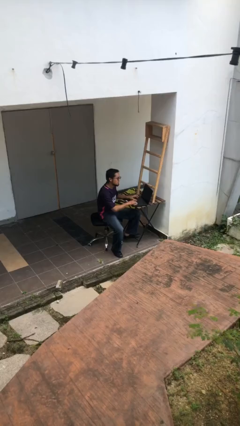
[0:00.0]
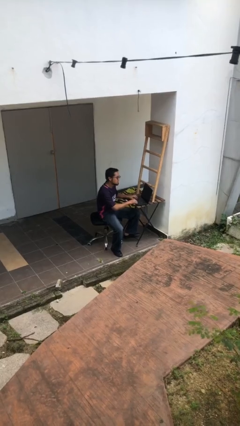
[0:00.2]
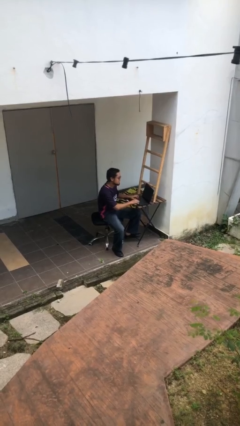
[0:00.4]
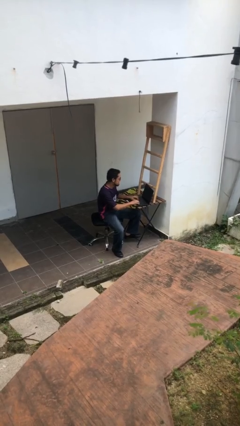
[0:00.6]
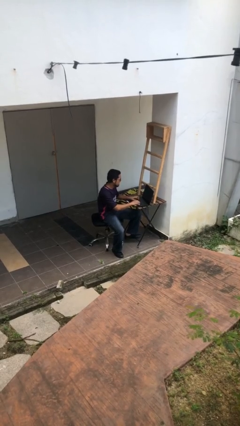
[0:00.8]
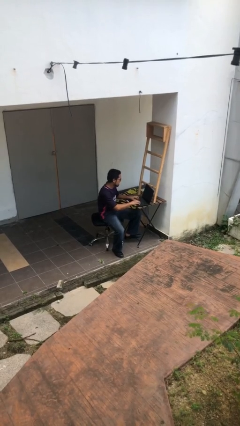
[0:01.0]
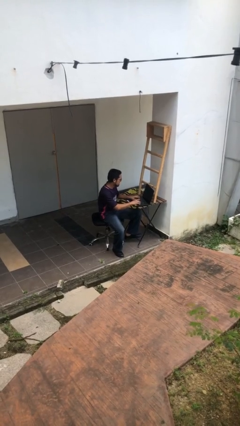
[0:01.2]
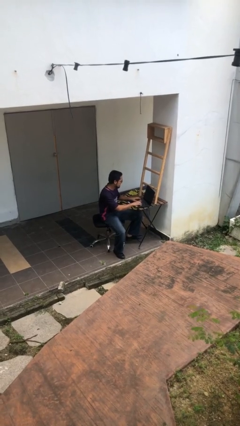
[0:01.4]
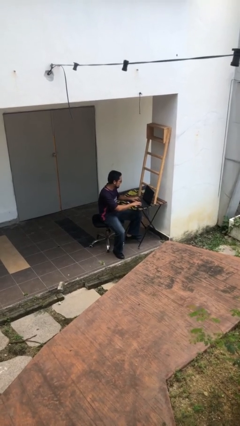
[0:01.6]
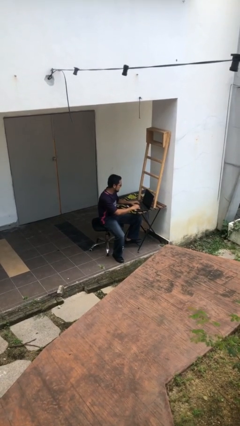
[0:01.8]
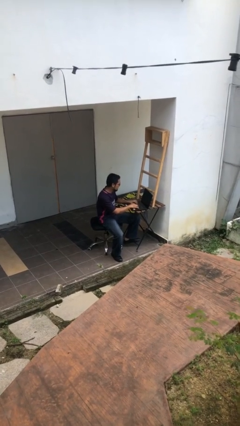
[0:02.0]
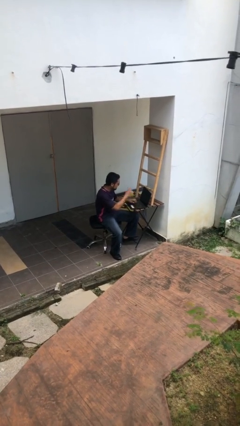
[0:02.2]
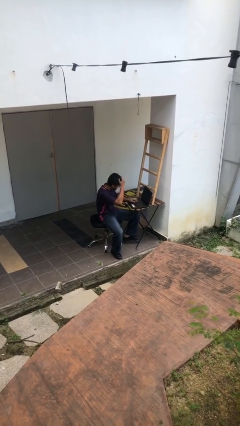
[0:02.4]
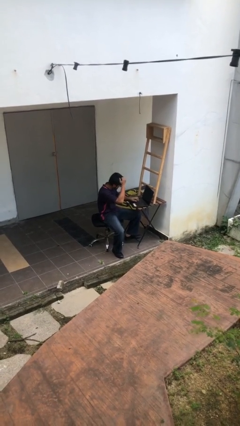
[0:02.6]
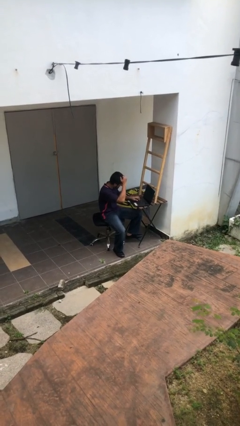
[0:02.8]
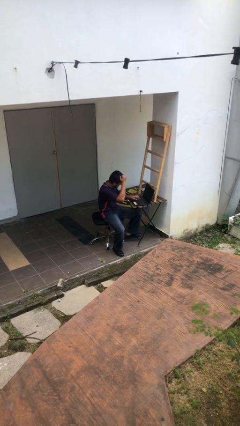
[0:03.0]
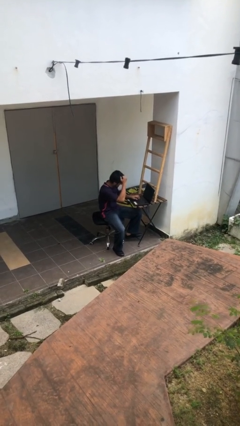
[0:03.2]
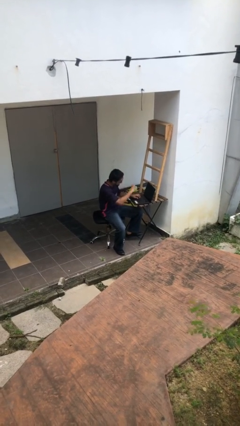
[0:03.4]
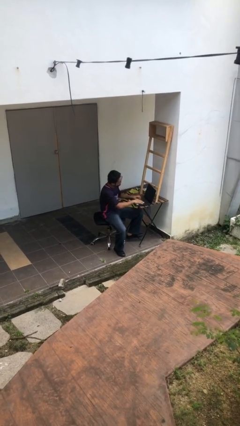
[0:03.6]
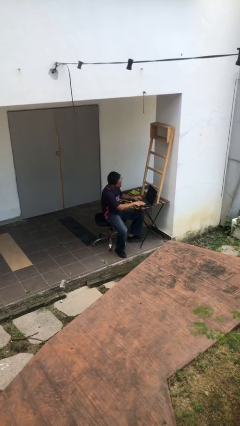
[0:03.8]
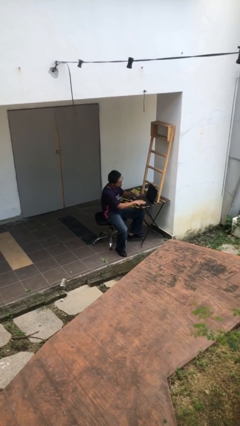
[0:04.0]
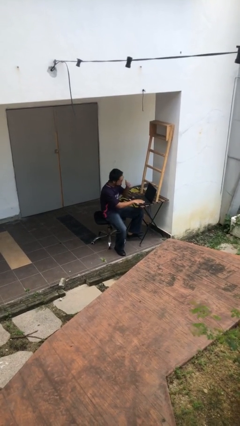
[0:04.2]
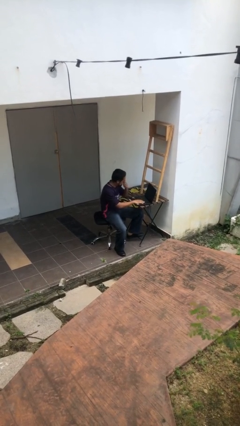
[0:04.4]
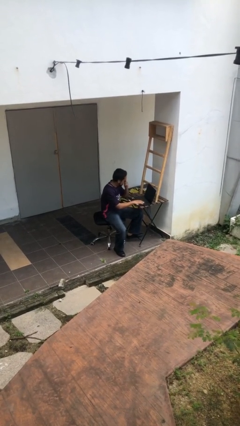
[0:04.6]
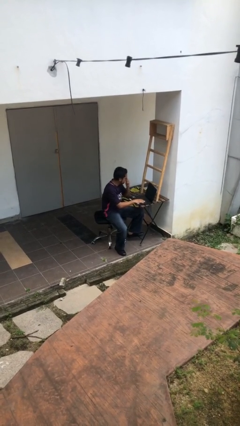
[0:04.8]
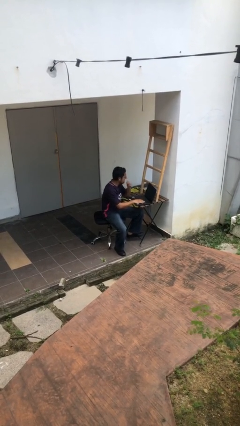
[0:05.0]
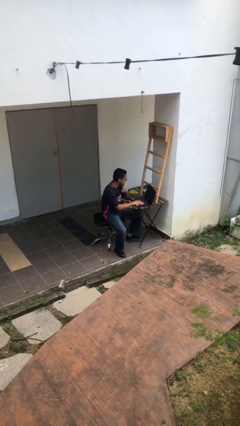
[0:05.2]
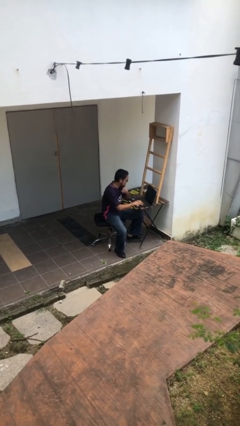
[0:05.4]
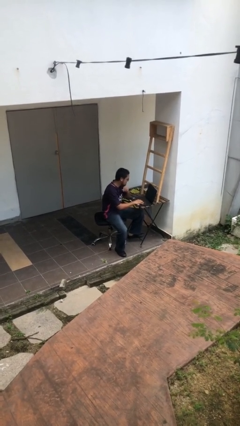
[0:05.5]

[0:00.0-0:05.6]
person interacts with laptop

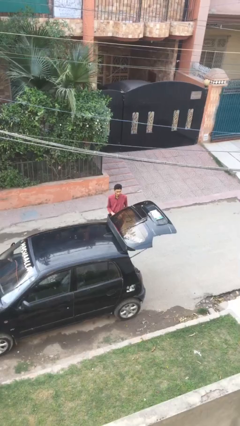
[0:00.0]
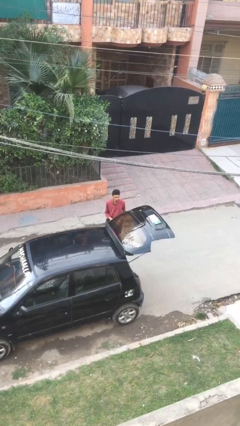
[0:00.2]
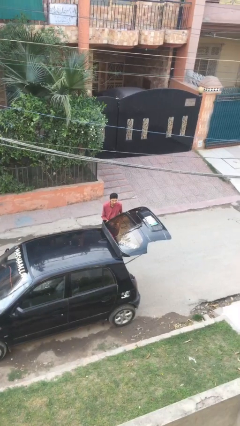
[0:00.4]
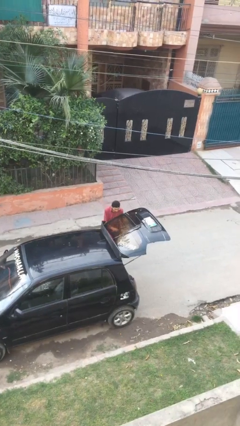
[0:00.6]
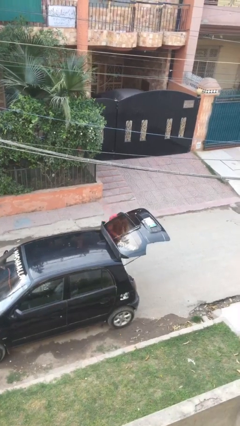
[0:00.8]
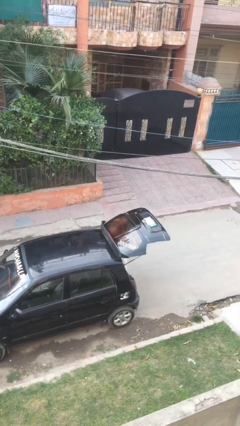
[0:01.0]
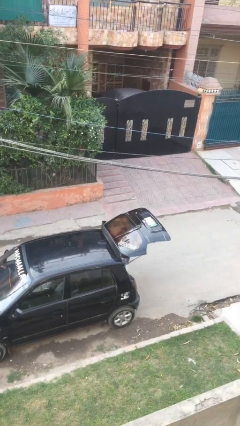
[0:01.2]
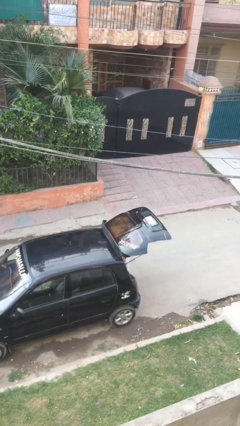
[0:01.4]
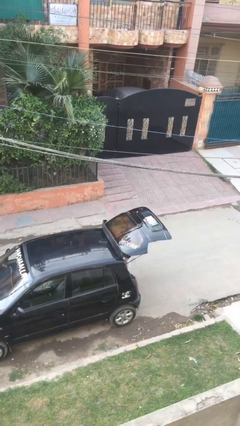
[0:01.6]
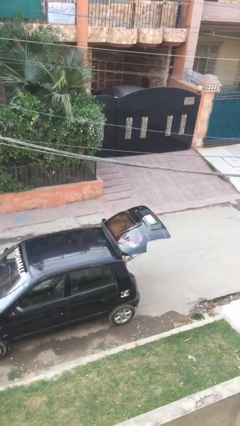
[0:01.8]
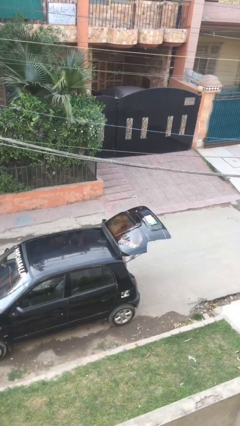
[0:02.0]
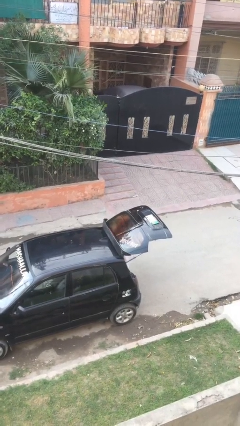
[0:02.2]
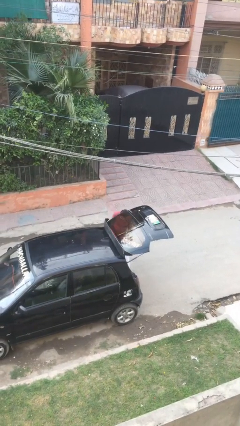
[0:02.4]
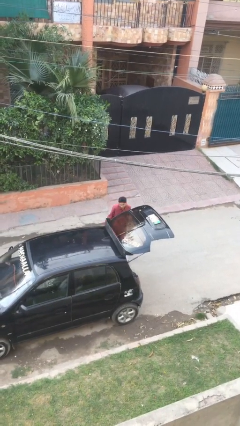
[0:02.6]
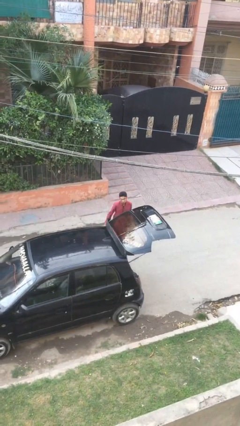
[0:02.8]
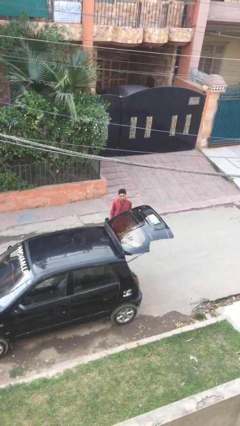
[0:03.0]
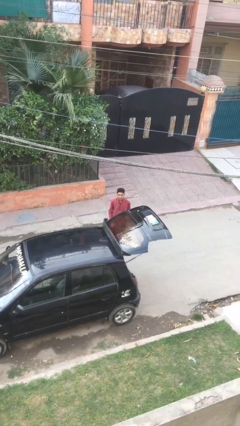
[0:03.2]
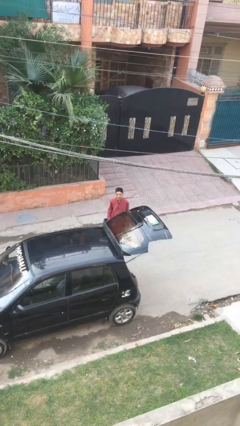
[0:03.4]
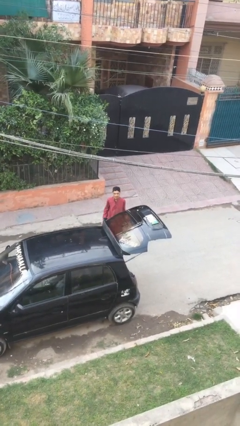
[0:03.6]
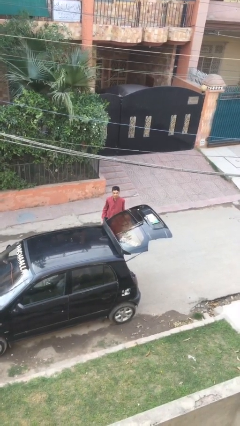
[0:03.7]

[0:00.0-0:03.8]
person loads car

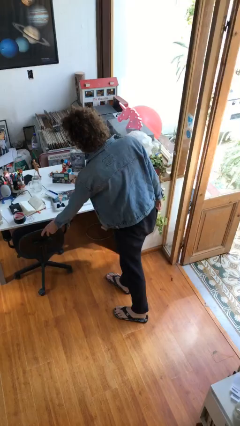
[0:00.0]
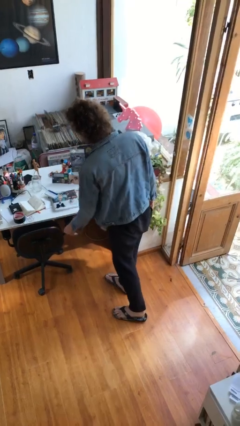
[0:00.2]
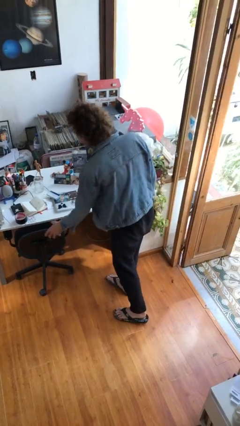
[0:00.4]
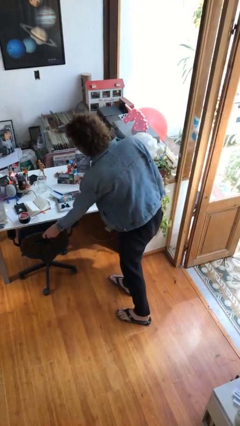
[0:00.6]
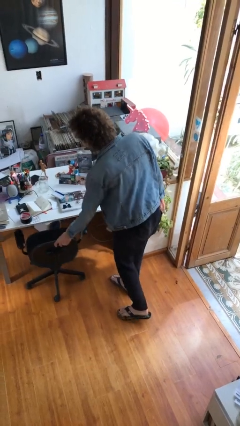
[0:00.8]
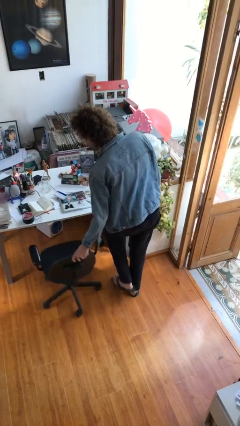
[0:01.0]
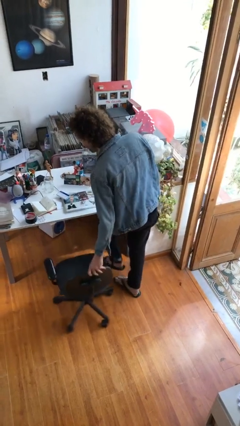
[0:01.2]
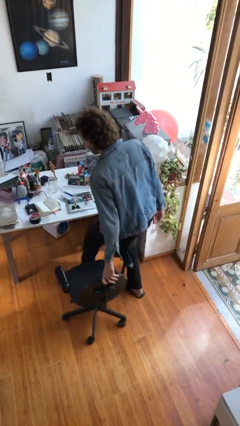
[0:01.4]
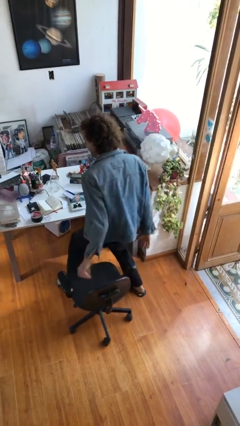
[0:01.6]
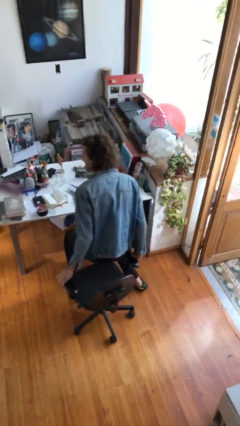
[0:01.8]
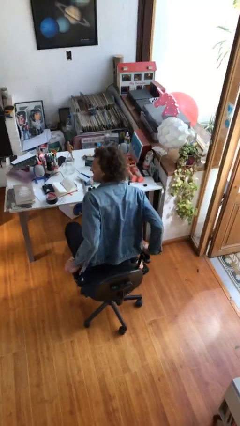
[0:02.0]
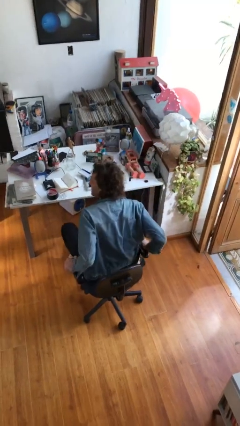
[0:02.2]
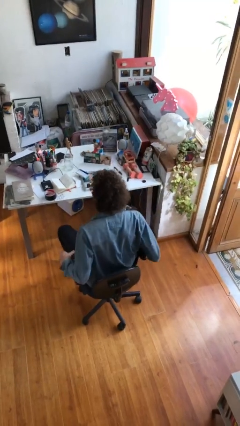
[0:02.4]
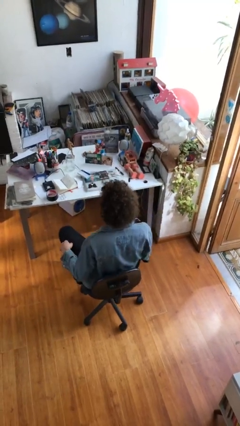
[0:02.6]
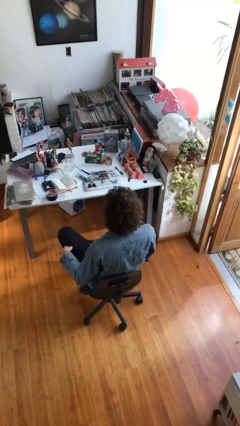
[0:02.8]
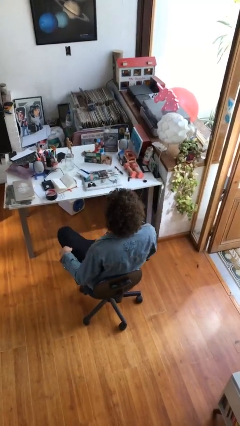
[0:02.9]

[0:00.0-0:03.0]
person sits down

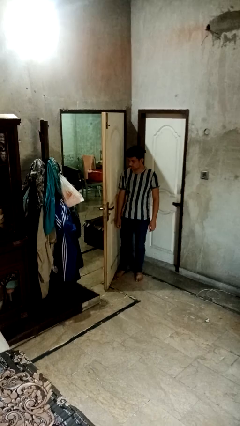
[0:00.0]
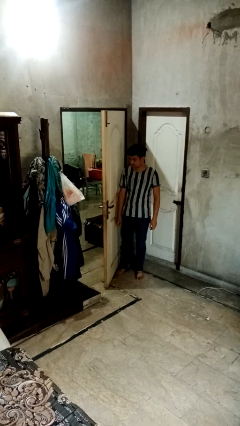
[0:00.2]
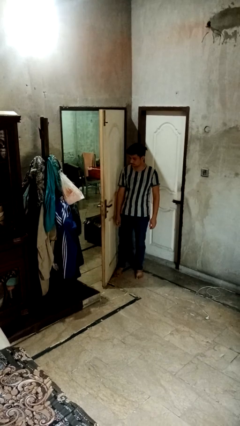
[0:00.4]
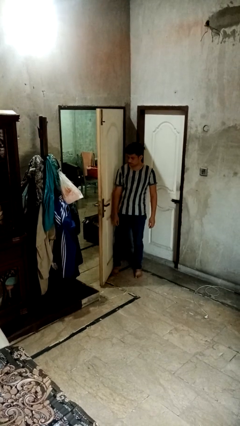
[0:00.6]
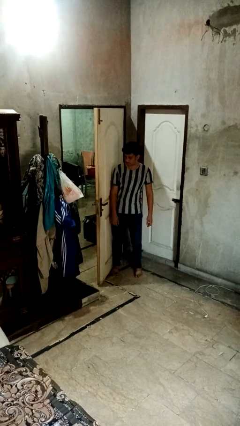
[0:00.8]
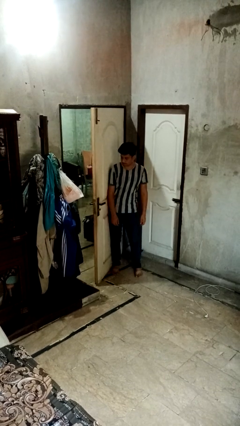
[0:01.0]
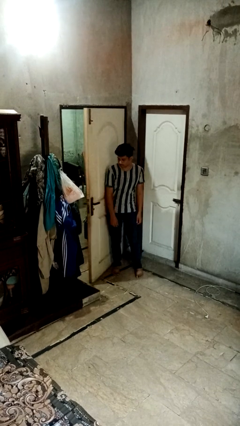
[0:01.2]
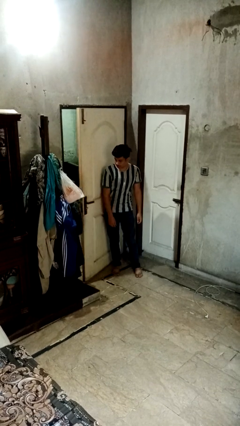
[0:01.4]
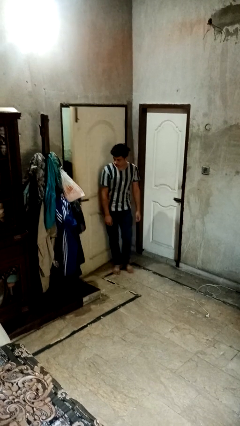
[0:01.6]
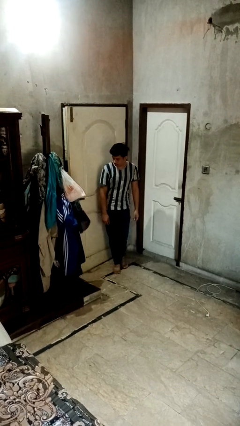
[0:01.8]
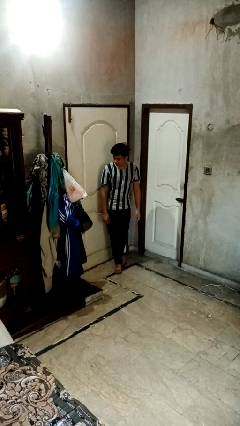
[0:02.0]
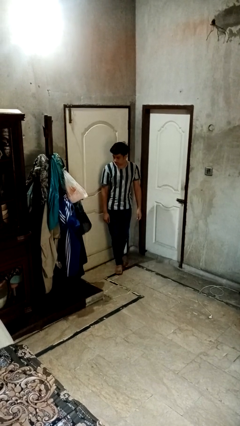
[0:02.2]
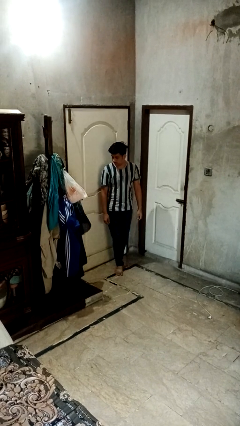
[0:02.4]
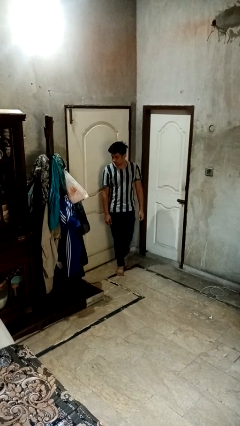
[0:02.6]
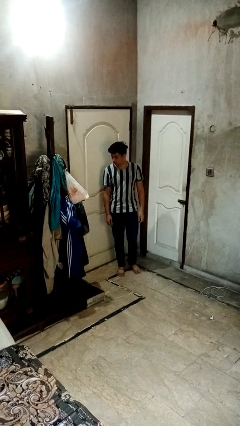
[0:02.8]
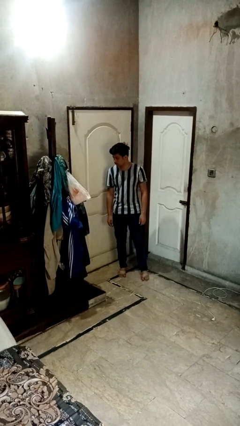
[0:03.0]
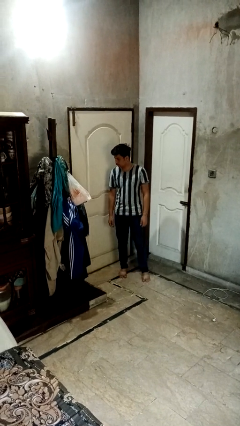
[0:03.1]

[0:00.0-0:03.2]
person closes door with hip

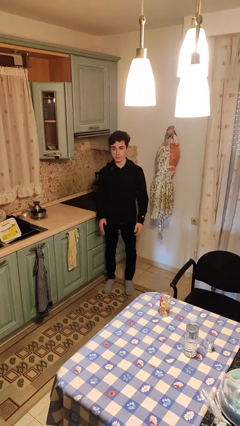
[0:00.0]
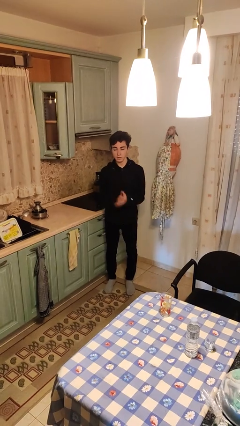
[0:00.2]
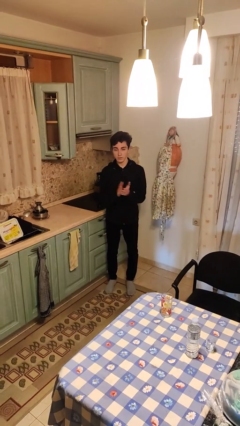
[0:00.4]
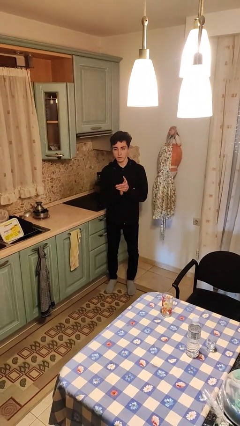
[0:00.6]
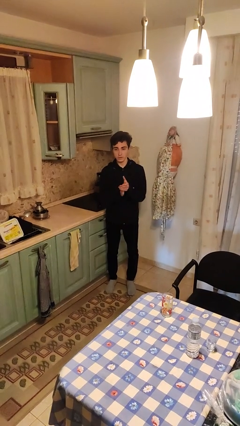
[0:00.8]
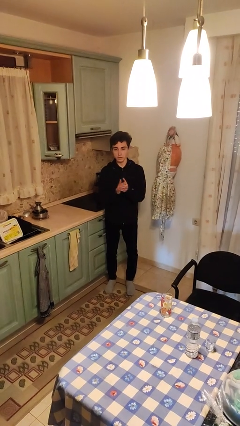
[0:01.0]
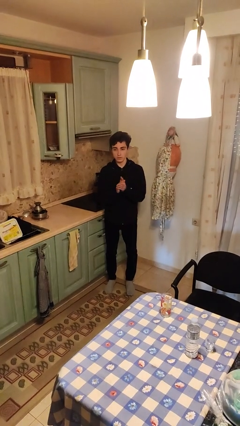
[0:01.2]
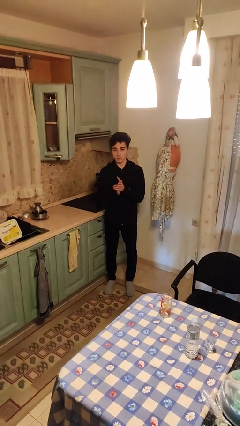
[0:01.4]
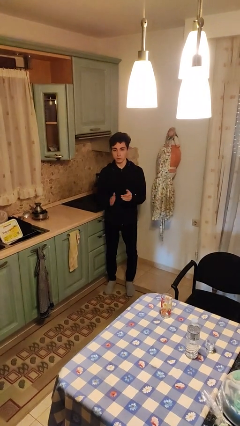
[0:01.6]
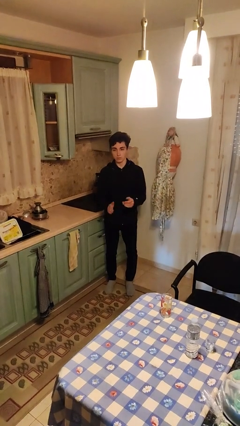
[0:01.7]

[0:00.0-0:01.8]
person claps hands

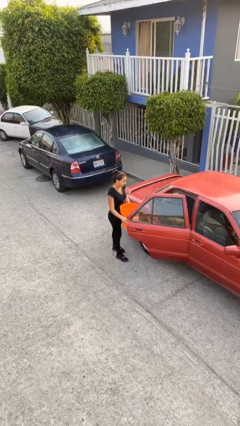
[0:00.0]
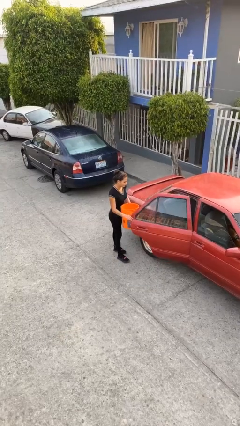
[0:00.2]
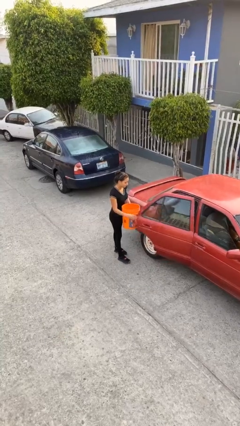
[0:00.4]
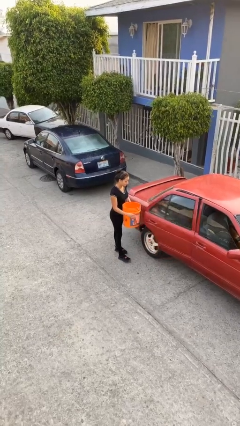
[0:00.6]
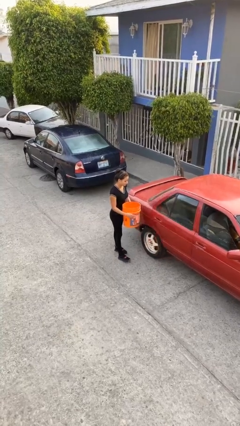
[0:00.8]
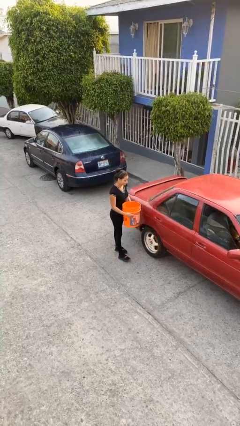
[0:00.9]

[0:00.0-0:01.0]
person closes car door
